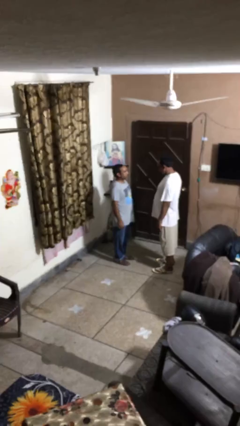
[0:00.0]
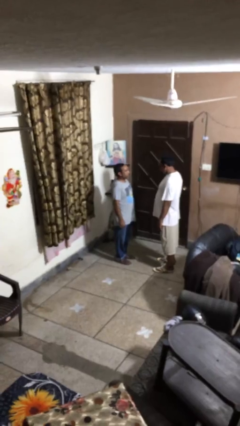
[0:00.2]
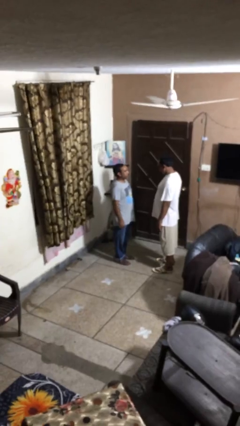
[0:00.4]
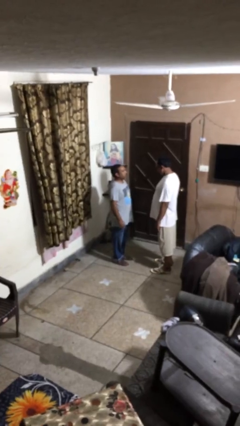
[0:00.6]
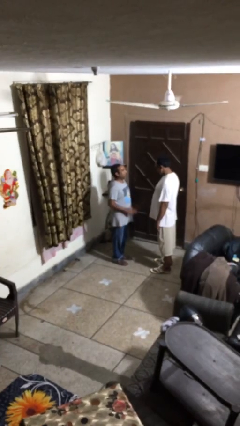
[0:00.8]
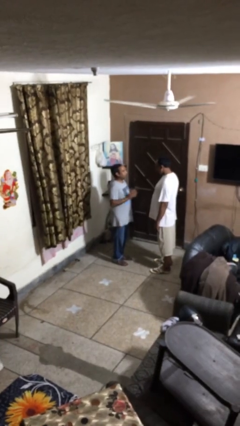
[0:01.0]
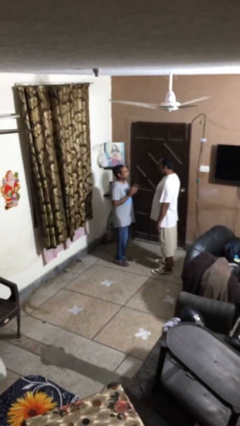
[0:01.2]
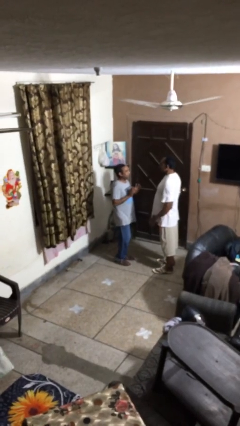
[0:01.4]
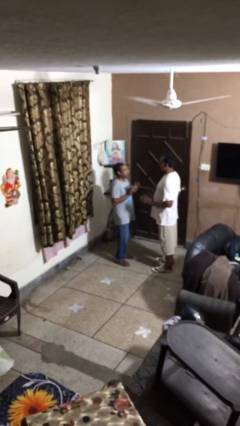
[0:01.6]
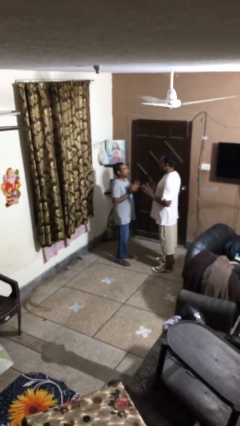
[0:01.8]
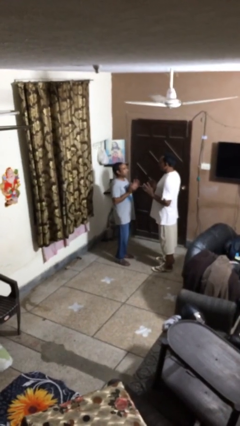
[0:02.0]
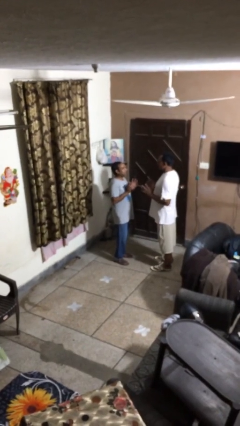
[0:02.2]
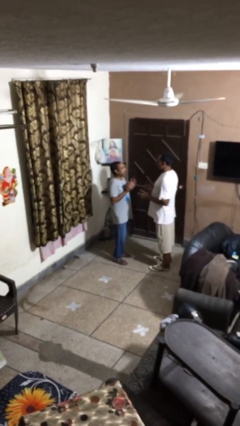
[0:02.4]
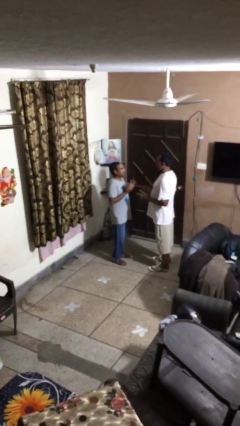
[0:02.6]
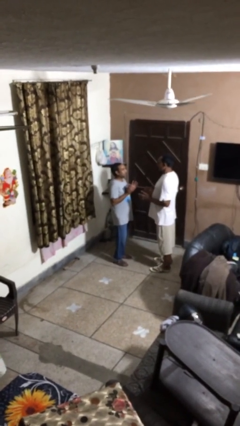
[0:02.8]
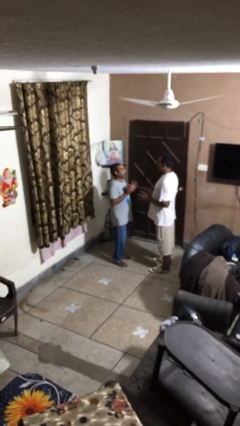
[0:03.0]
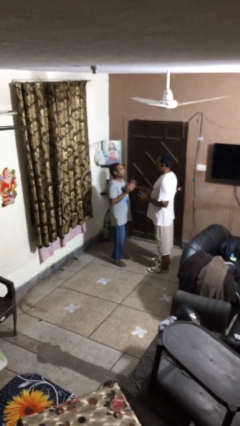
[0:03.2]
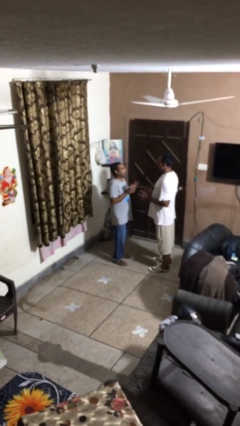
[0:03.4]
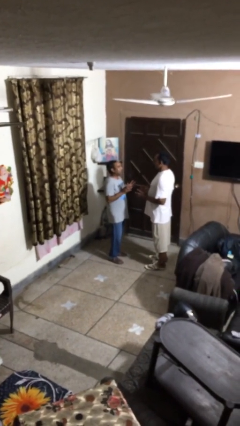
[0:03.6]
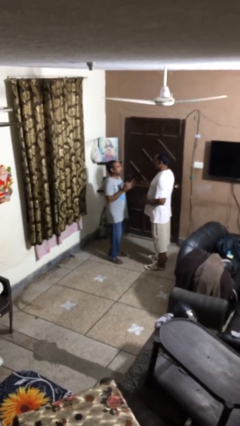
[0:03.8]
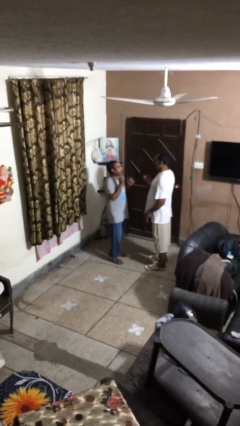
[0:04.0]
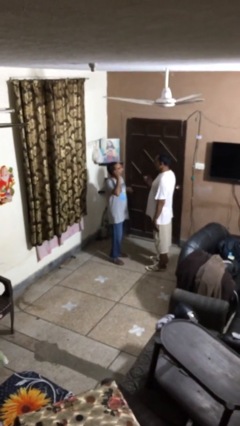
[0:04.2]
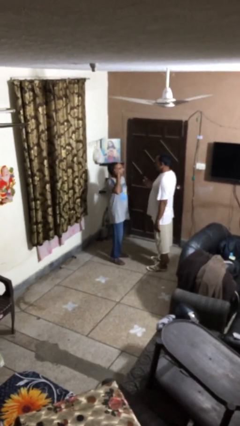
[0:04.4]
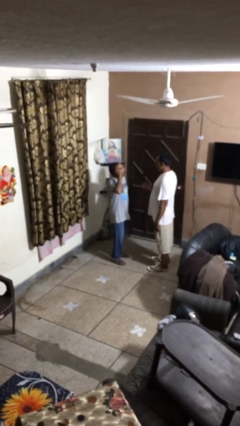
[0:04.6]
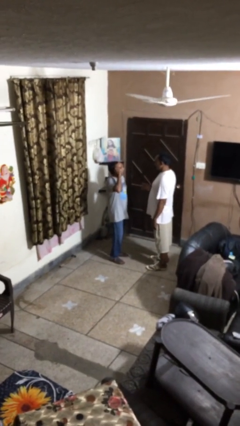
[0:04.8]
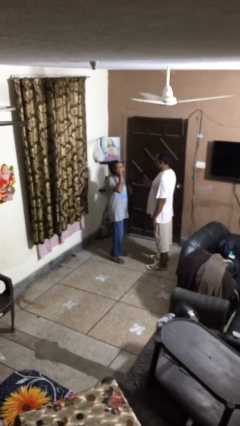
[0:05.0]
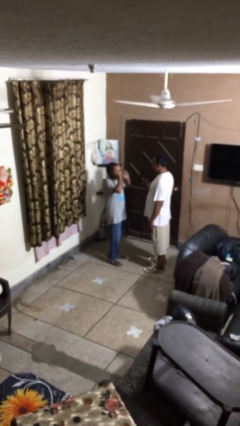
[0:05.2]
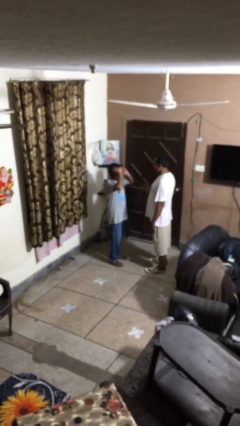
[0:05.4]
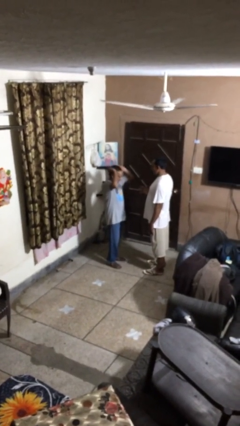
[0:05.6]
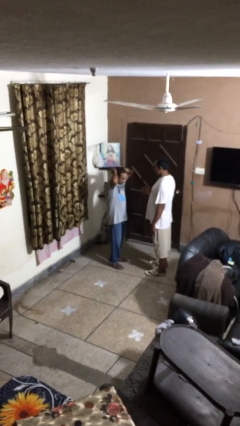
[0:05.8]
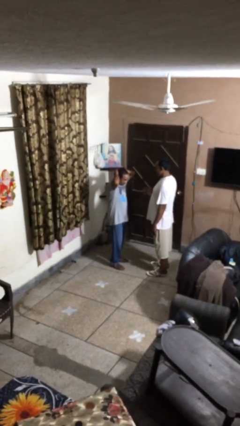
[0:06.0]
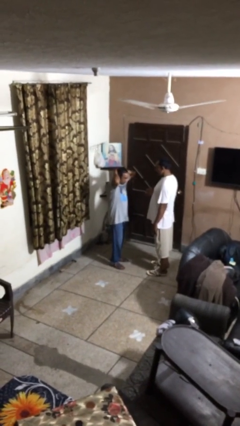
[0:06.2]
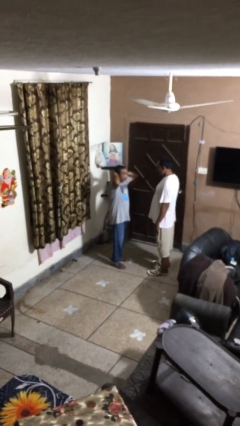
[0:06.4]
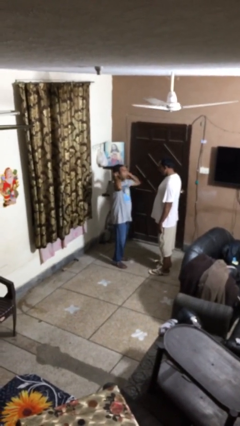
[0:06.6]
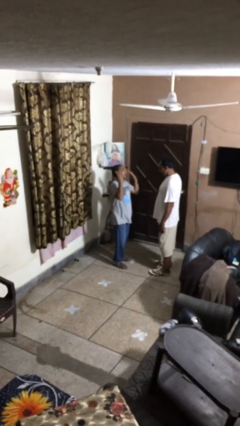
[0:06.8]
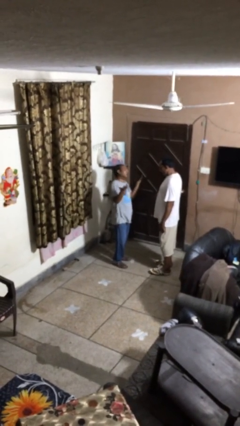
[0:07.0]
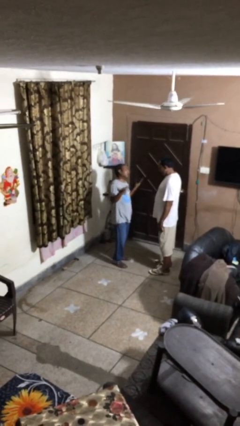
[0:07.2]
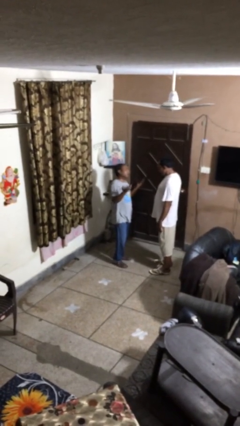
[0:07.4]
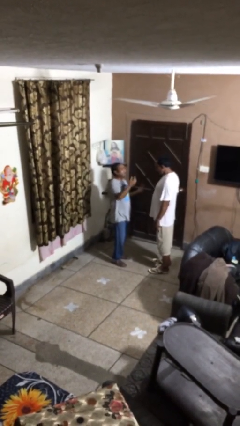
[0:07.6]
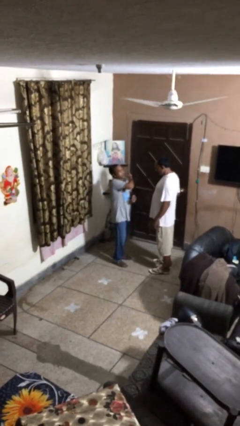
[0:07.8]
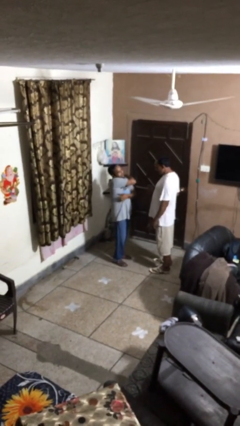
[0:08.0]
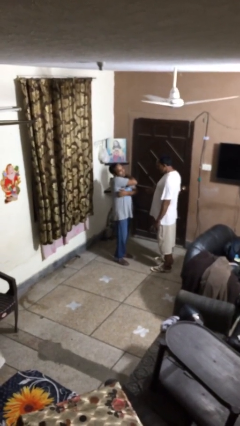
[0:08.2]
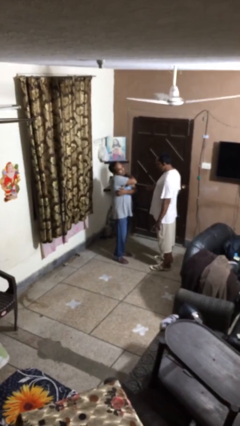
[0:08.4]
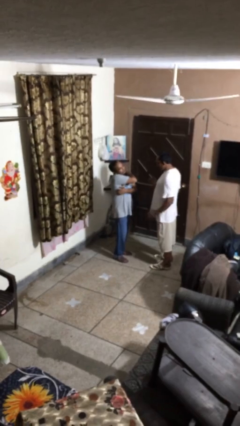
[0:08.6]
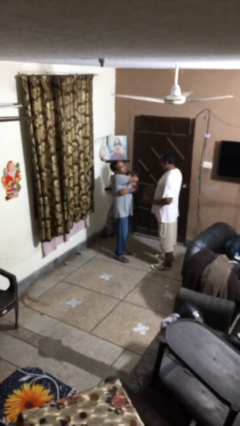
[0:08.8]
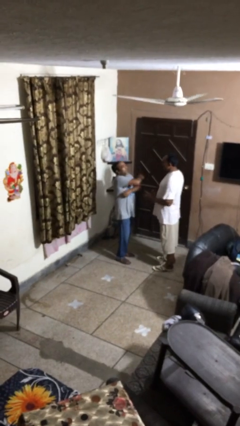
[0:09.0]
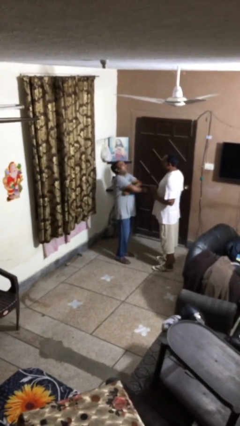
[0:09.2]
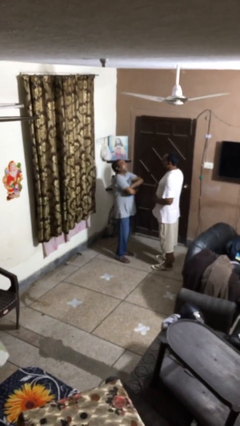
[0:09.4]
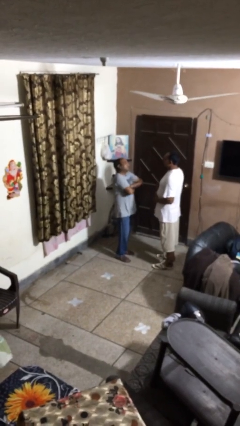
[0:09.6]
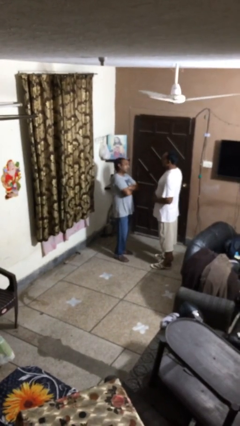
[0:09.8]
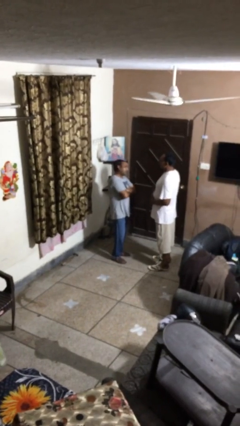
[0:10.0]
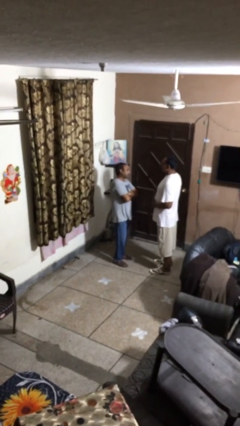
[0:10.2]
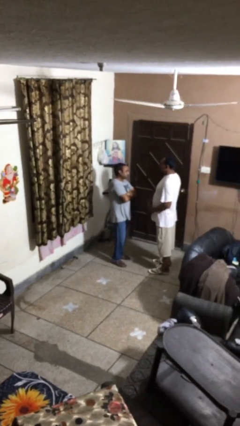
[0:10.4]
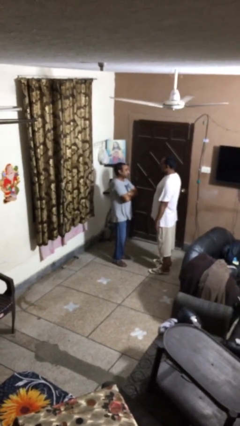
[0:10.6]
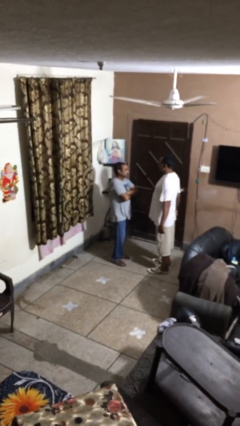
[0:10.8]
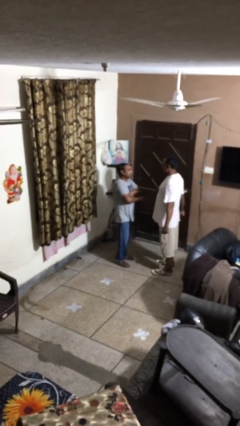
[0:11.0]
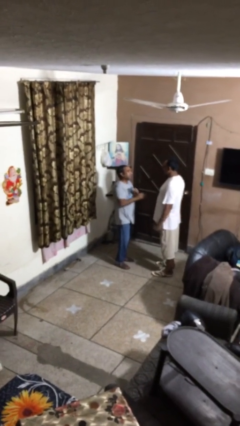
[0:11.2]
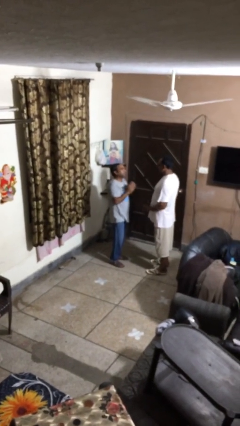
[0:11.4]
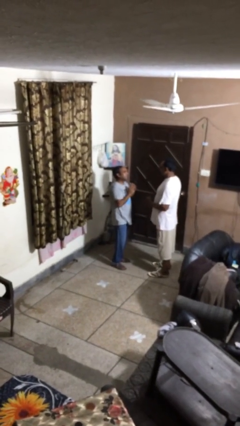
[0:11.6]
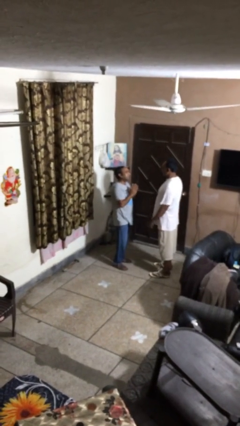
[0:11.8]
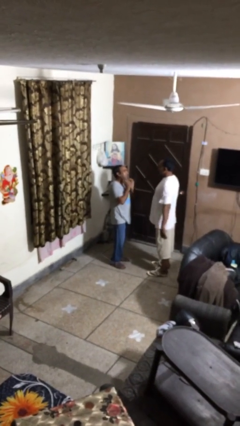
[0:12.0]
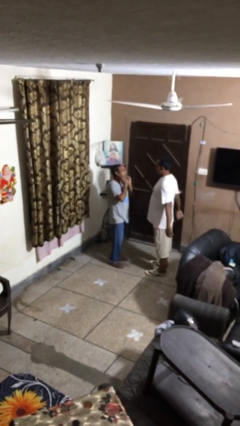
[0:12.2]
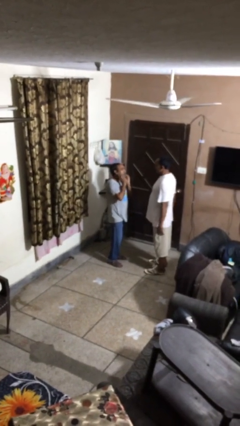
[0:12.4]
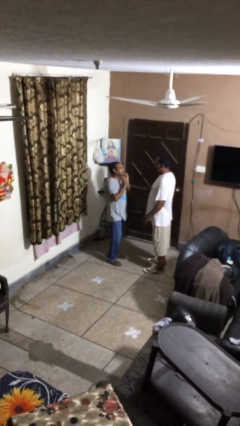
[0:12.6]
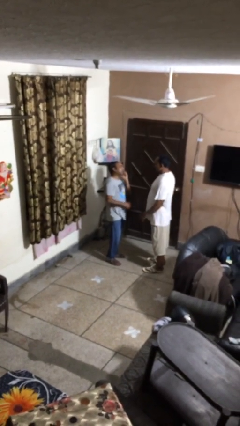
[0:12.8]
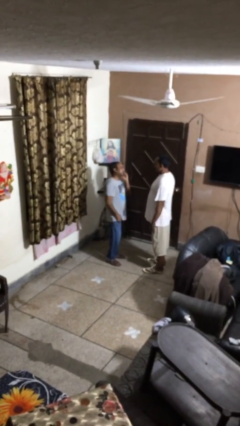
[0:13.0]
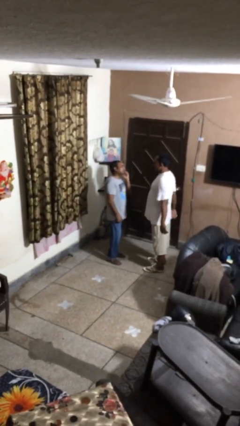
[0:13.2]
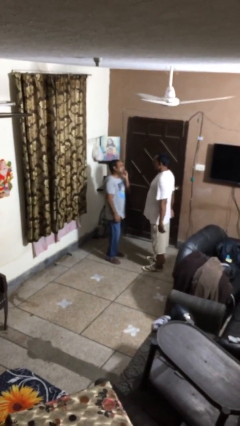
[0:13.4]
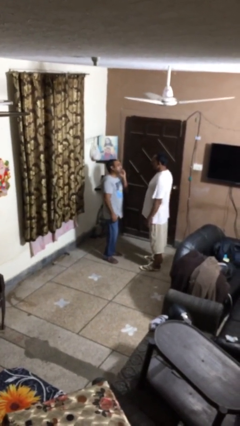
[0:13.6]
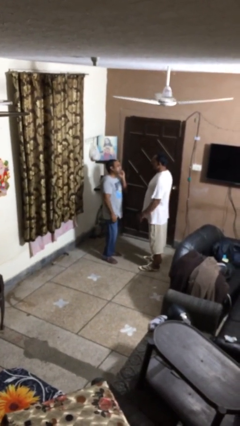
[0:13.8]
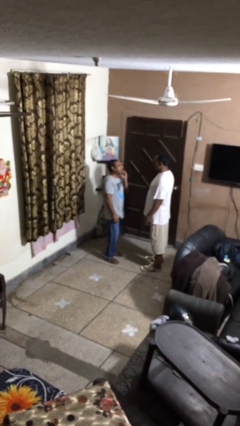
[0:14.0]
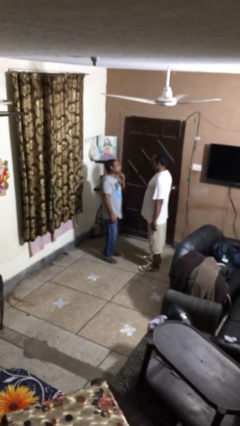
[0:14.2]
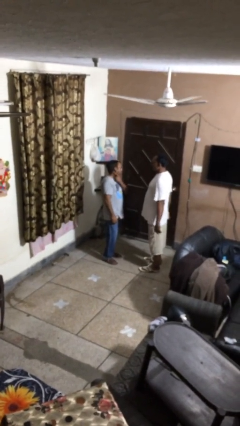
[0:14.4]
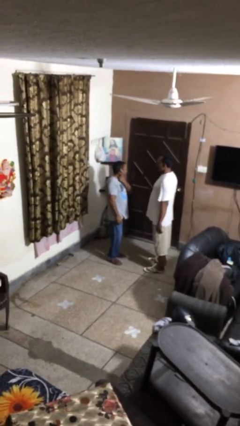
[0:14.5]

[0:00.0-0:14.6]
person talks to person

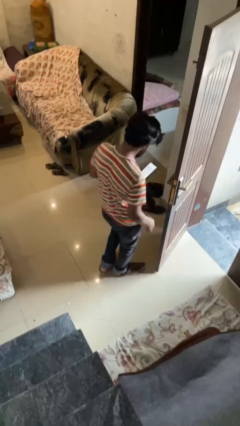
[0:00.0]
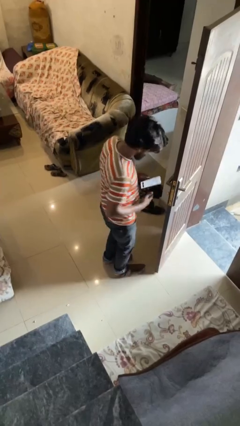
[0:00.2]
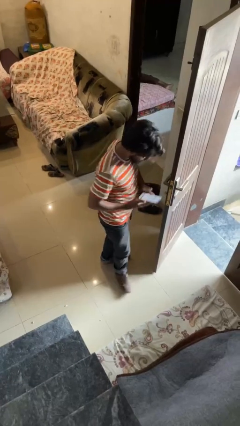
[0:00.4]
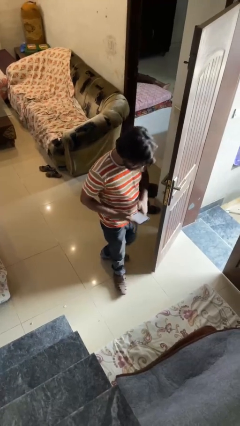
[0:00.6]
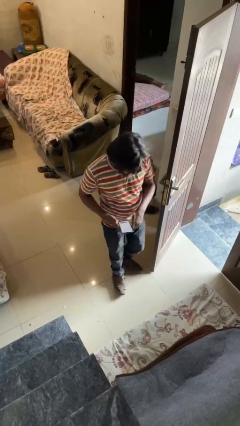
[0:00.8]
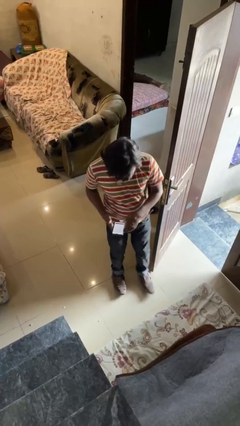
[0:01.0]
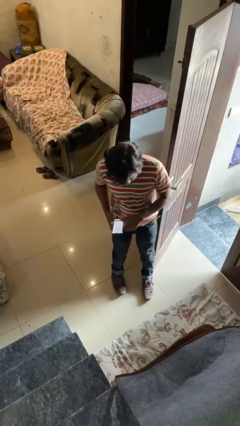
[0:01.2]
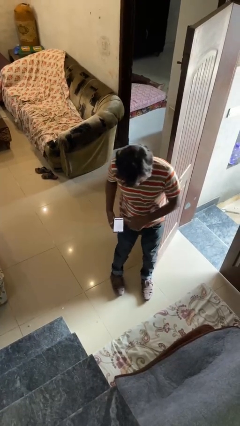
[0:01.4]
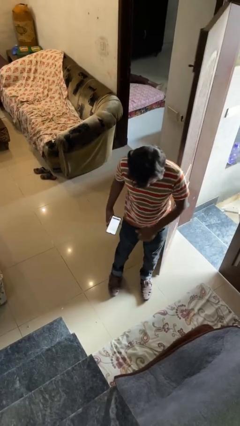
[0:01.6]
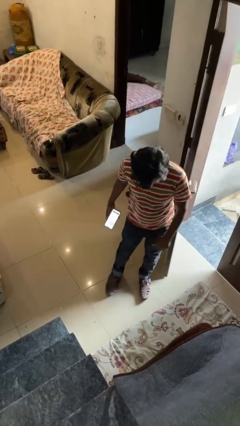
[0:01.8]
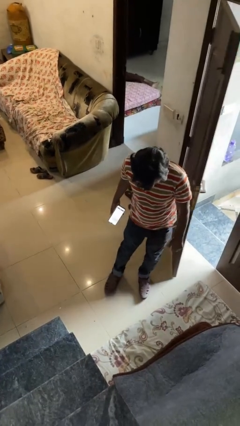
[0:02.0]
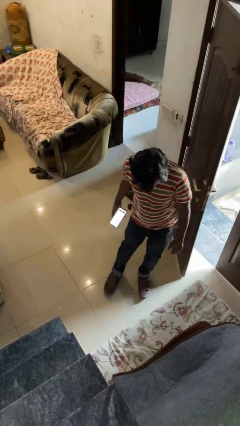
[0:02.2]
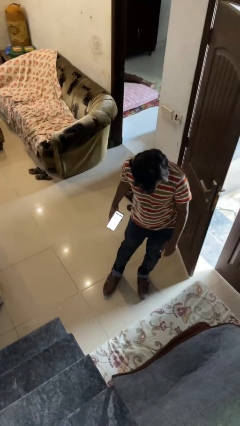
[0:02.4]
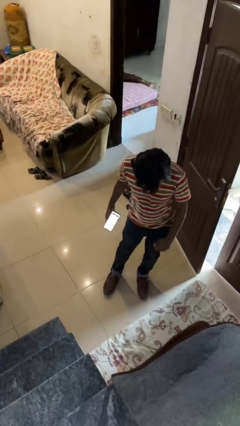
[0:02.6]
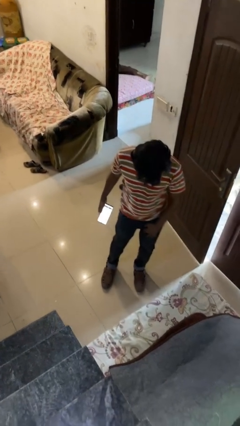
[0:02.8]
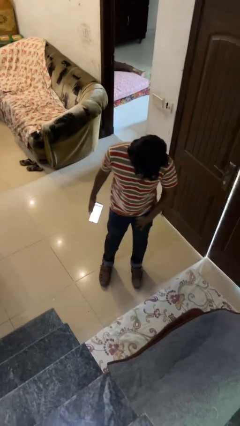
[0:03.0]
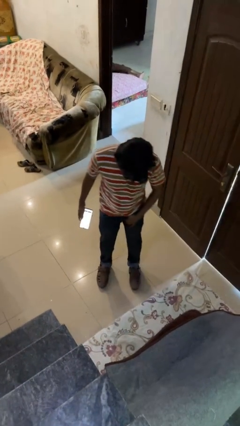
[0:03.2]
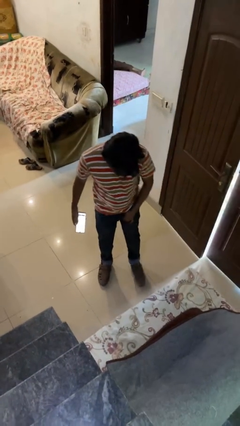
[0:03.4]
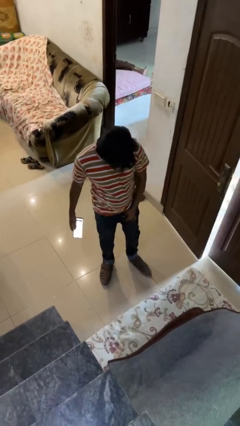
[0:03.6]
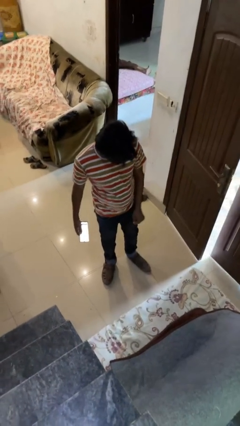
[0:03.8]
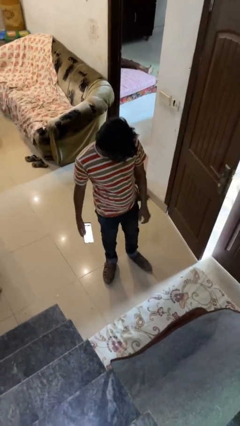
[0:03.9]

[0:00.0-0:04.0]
person closes door with hip
